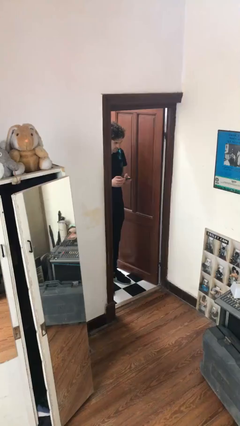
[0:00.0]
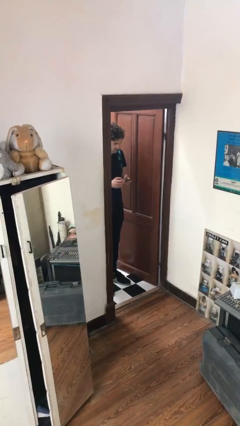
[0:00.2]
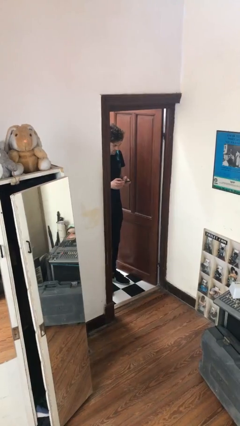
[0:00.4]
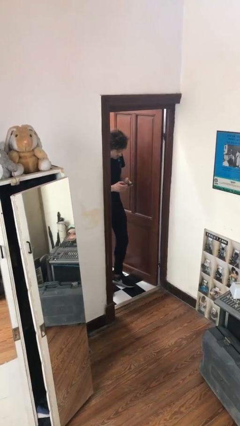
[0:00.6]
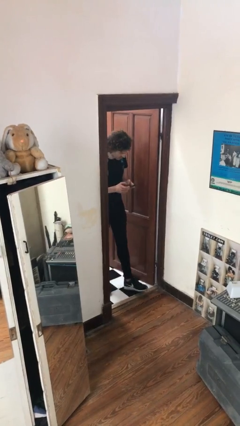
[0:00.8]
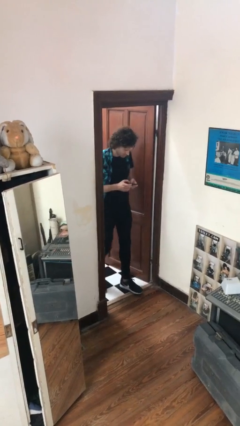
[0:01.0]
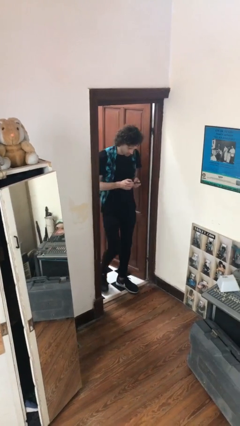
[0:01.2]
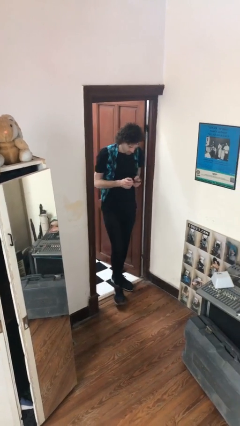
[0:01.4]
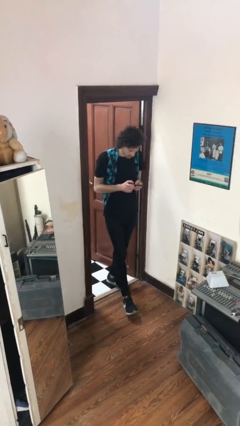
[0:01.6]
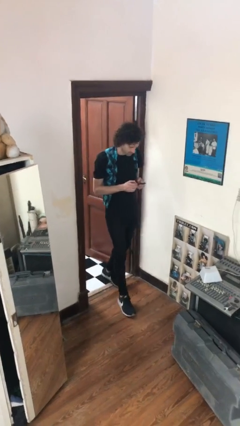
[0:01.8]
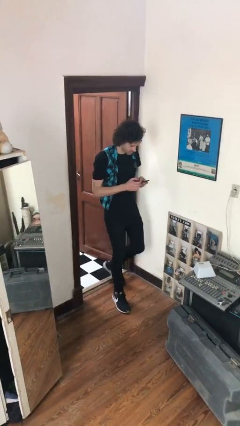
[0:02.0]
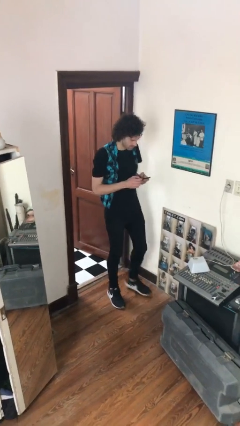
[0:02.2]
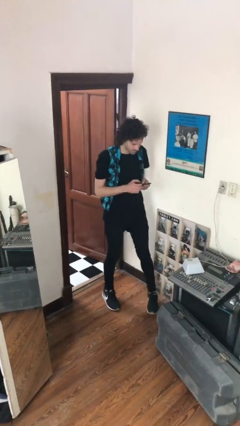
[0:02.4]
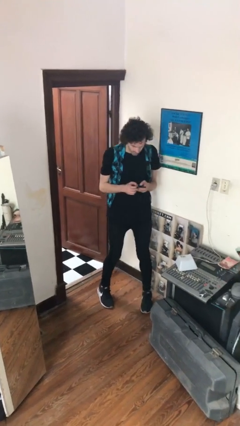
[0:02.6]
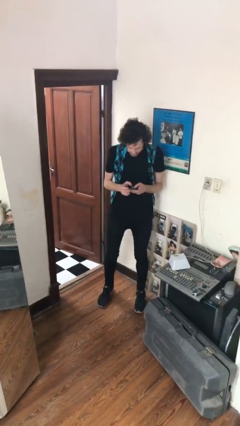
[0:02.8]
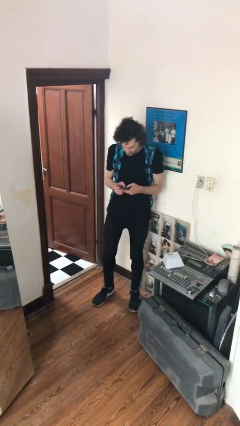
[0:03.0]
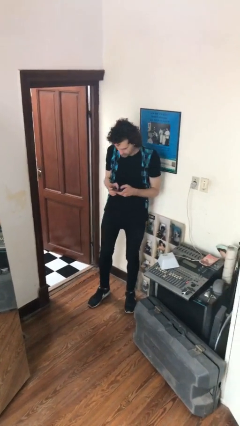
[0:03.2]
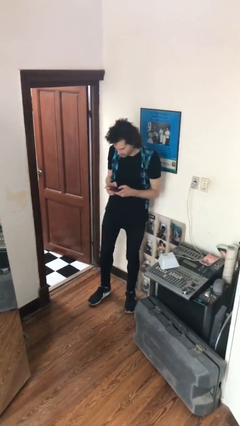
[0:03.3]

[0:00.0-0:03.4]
person enters scene through structure

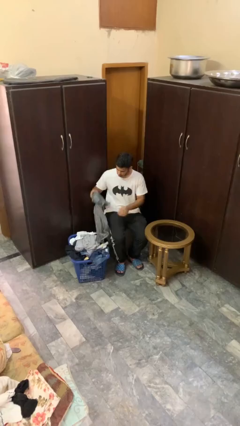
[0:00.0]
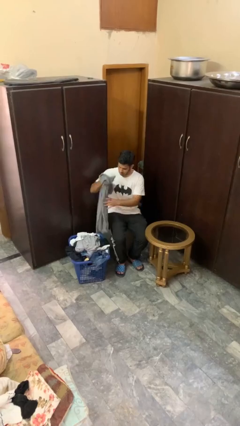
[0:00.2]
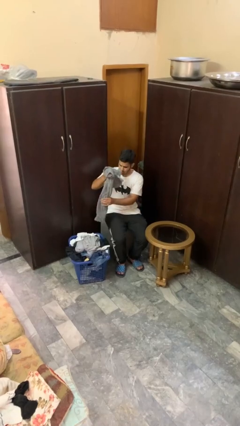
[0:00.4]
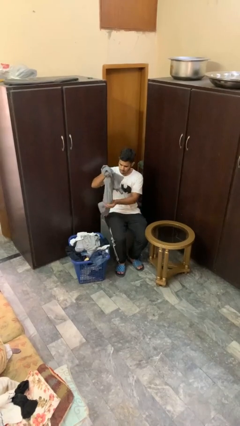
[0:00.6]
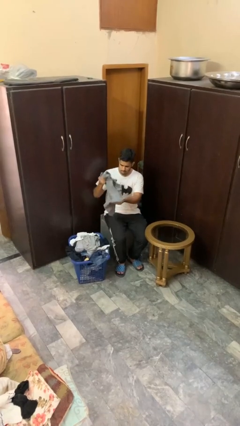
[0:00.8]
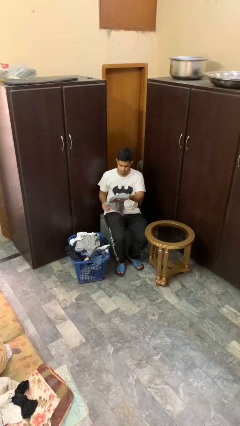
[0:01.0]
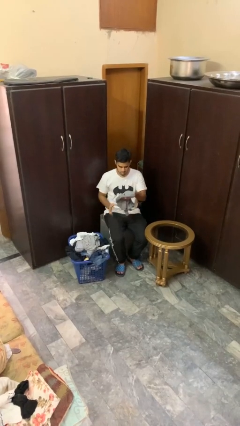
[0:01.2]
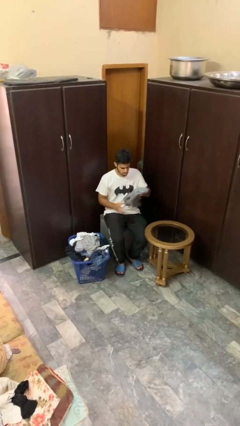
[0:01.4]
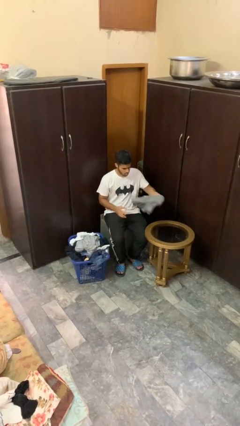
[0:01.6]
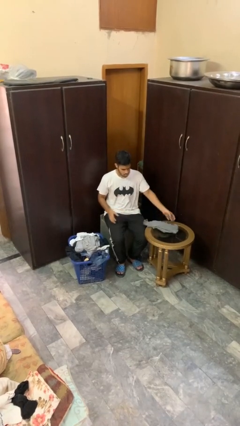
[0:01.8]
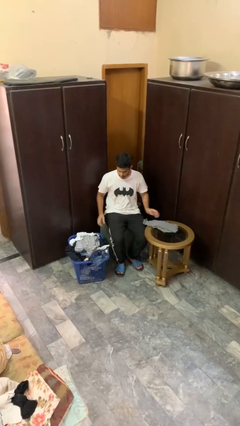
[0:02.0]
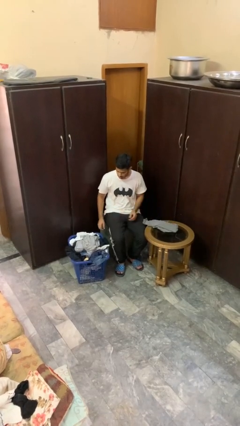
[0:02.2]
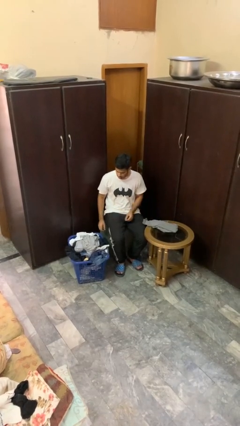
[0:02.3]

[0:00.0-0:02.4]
person folds shirt

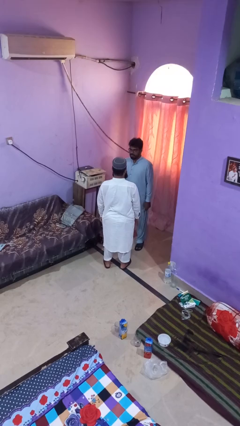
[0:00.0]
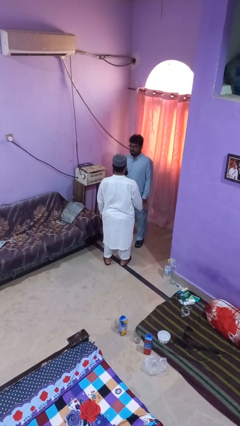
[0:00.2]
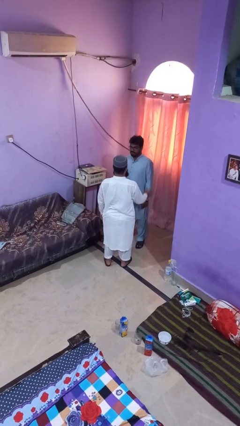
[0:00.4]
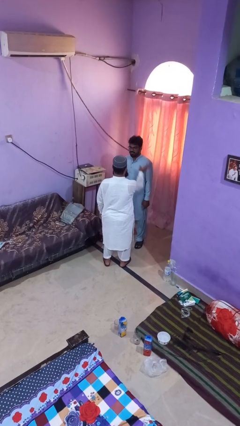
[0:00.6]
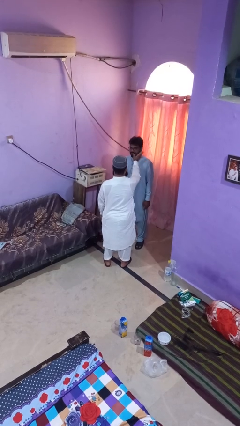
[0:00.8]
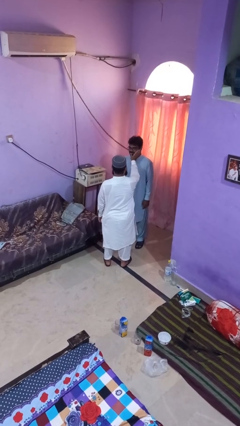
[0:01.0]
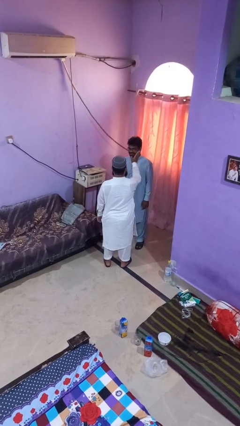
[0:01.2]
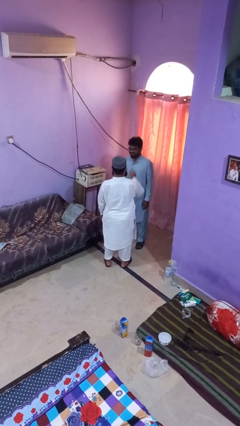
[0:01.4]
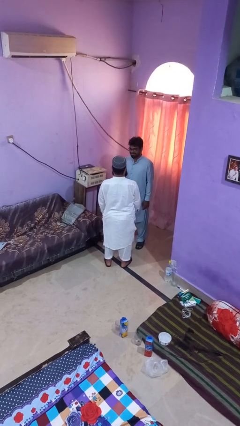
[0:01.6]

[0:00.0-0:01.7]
person touches face of person

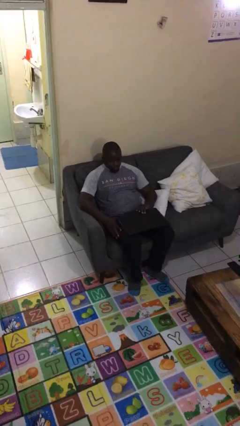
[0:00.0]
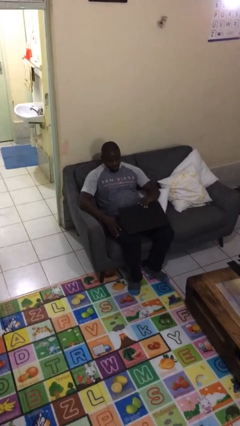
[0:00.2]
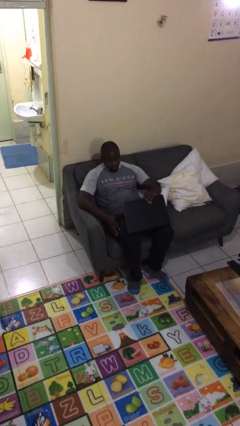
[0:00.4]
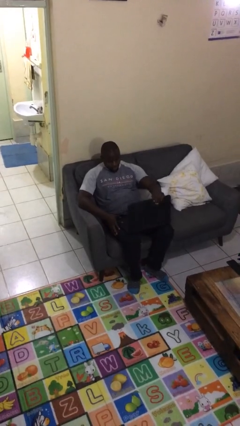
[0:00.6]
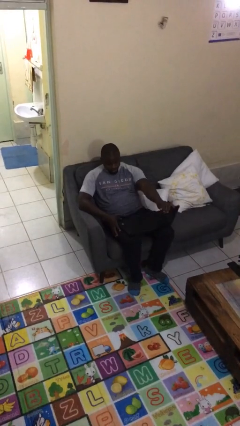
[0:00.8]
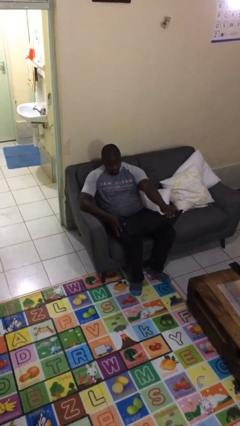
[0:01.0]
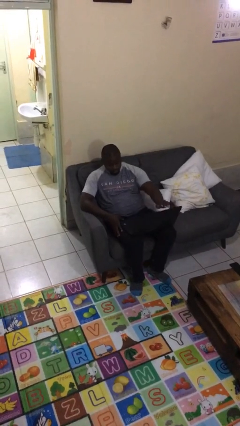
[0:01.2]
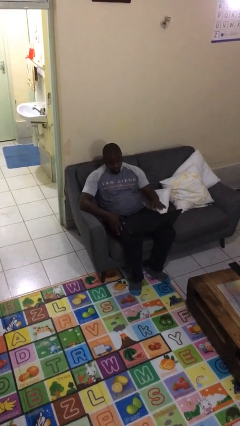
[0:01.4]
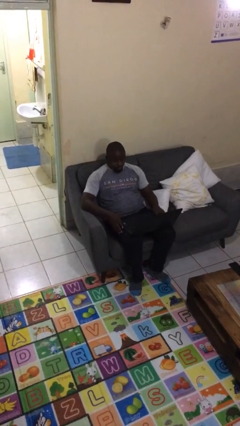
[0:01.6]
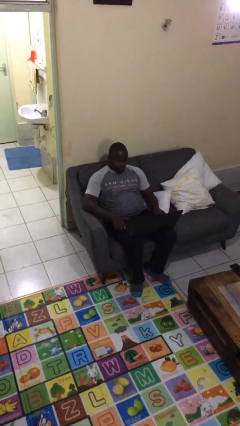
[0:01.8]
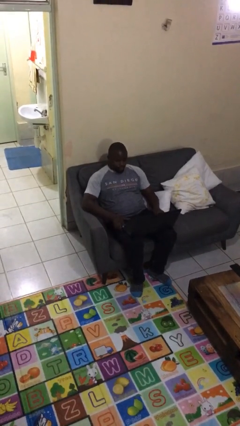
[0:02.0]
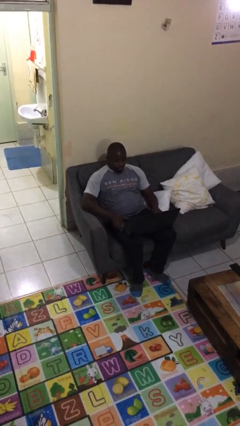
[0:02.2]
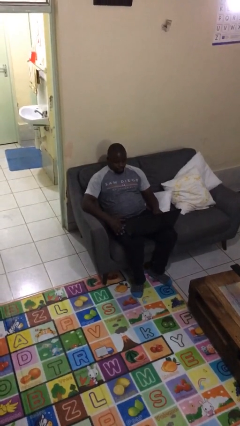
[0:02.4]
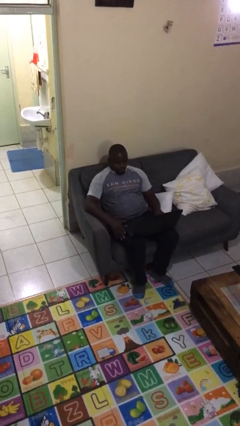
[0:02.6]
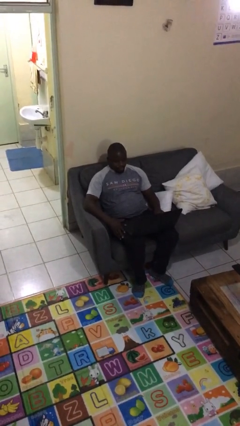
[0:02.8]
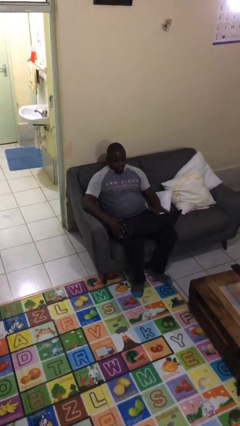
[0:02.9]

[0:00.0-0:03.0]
person opens laptop

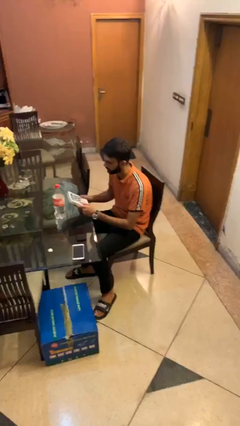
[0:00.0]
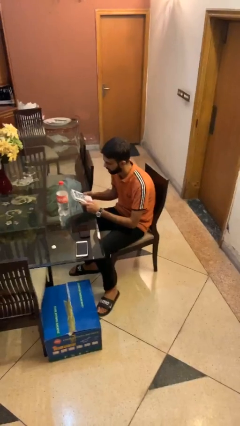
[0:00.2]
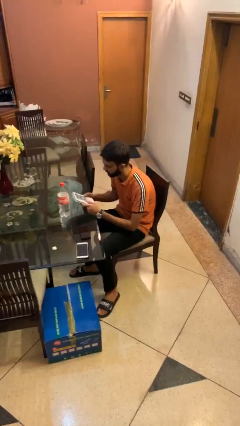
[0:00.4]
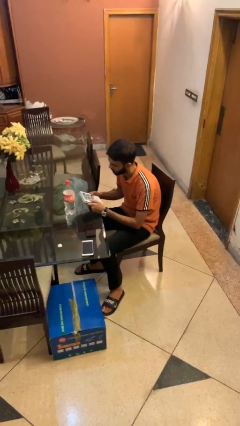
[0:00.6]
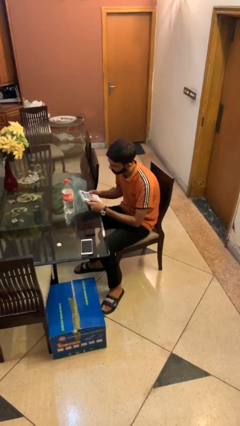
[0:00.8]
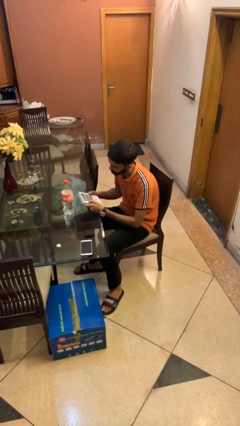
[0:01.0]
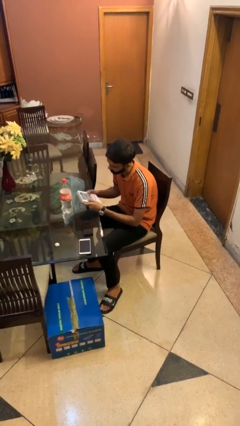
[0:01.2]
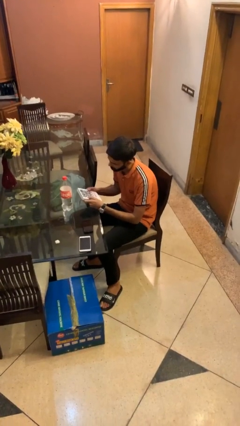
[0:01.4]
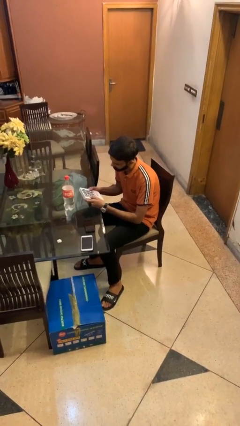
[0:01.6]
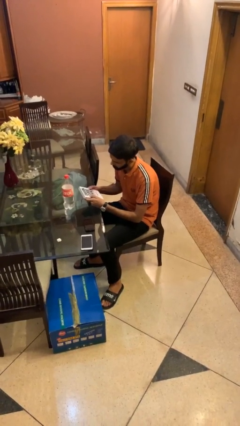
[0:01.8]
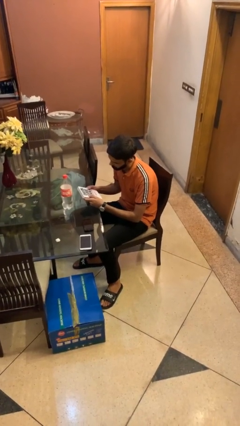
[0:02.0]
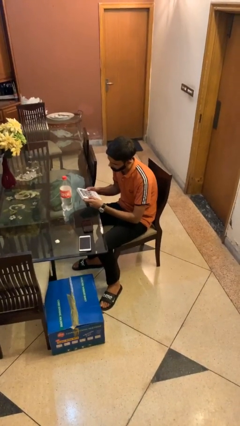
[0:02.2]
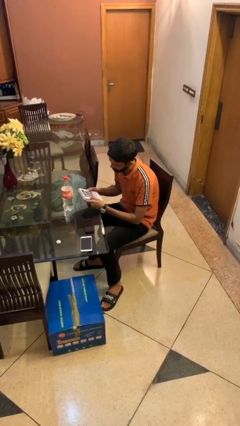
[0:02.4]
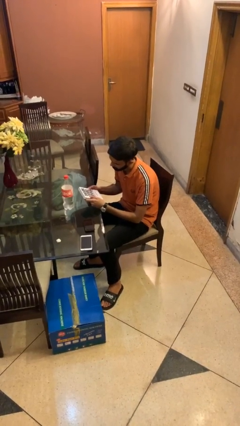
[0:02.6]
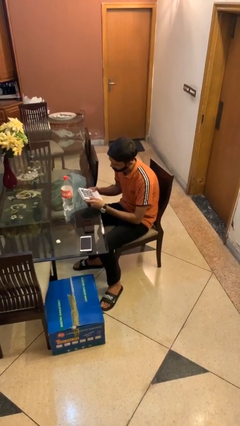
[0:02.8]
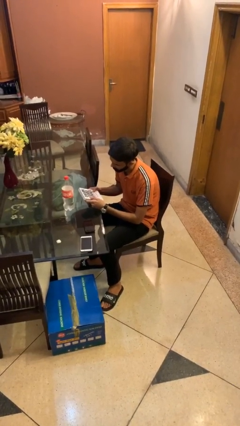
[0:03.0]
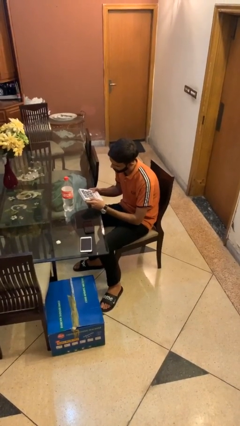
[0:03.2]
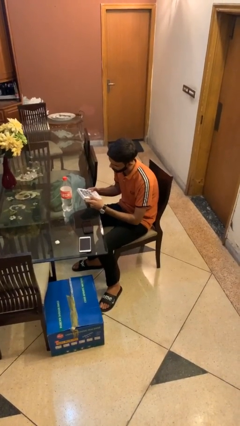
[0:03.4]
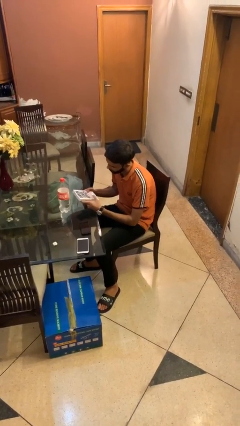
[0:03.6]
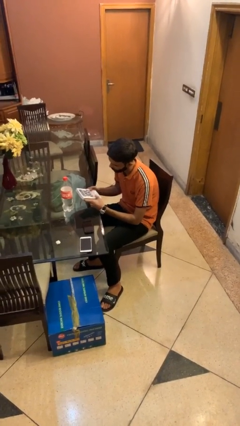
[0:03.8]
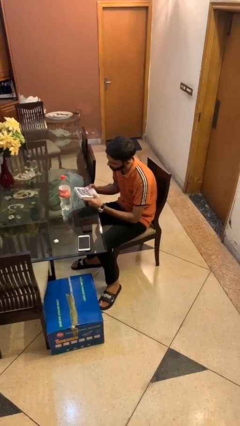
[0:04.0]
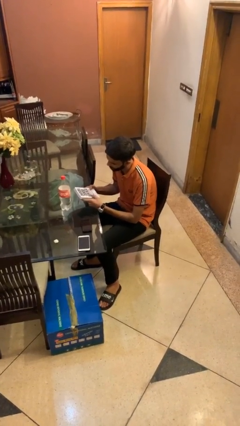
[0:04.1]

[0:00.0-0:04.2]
person reads document

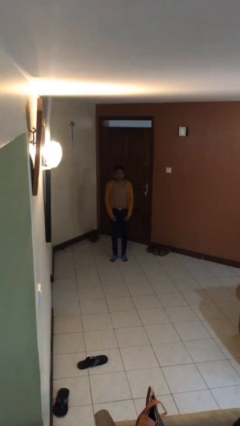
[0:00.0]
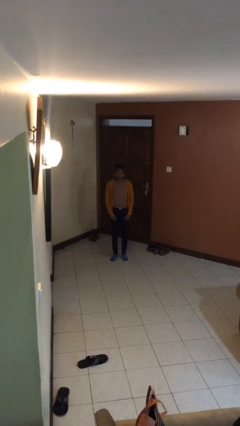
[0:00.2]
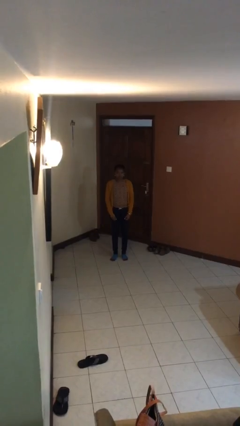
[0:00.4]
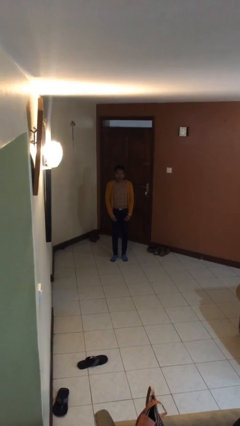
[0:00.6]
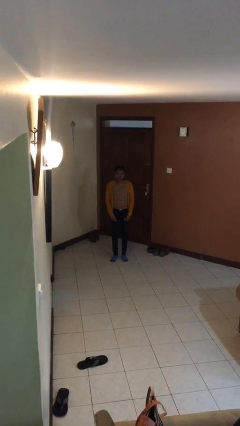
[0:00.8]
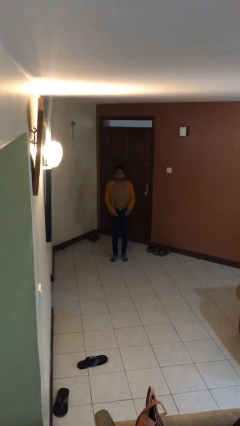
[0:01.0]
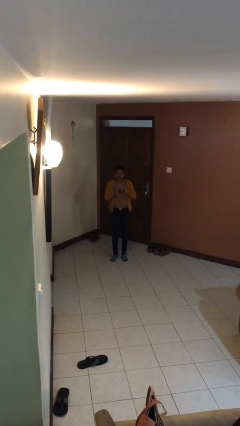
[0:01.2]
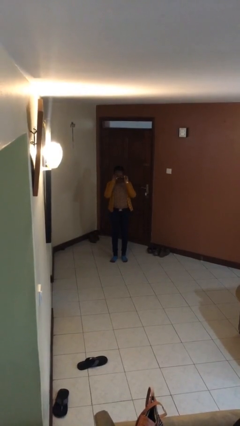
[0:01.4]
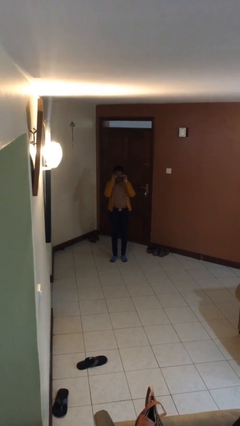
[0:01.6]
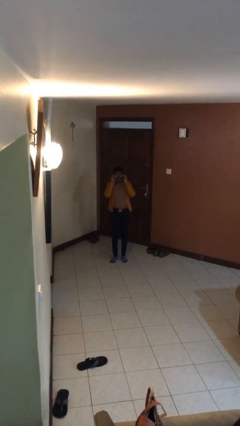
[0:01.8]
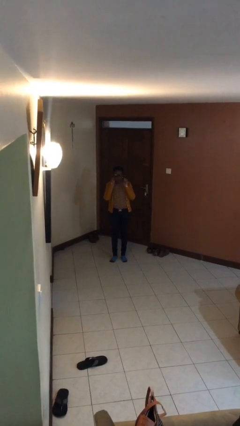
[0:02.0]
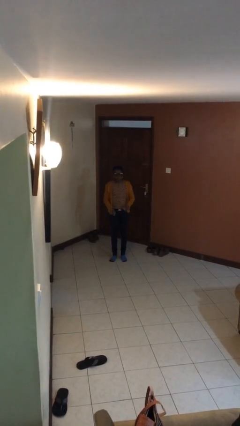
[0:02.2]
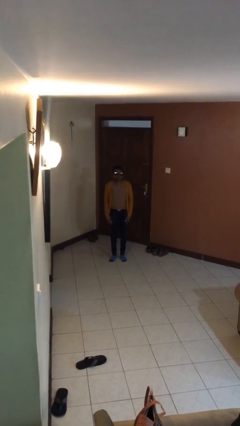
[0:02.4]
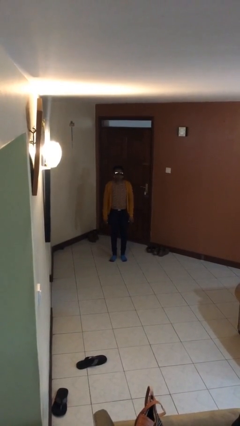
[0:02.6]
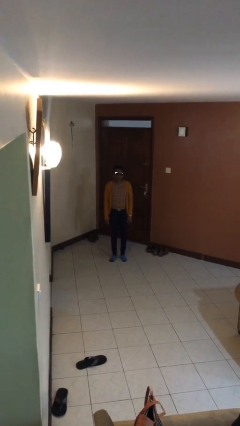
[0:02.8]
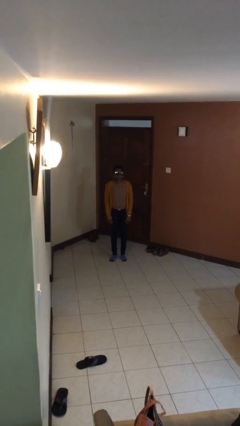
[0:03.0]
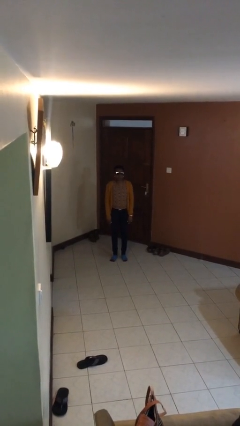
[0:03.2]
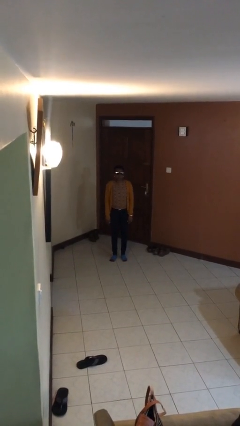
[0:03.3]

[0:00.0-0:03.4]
person puts on sunglasses
